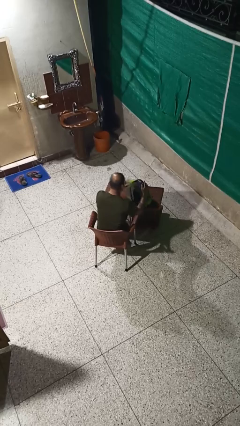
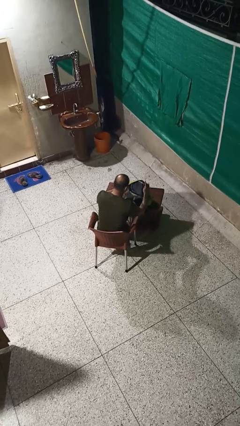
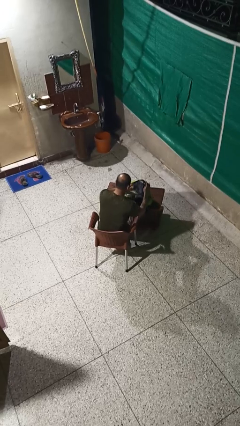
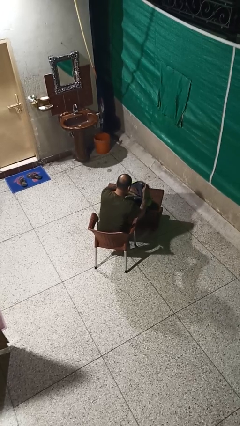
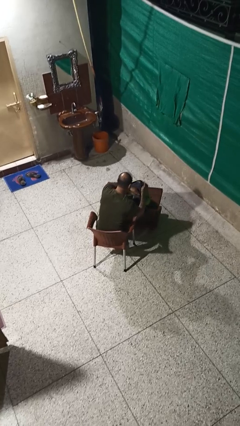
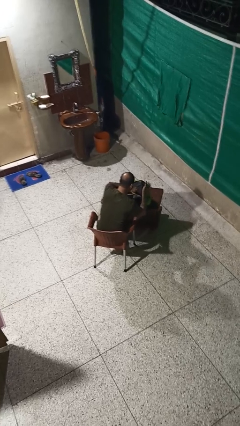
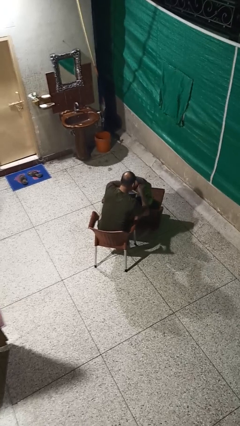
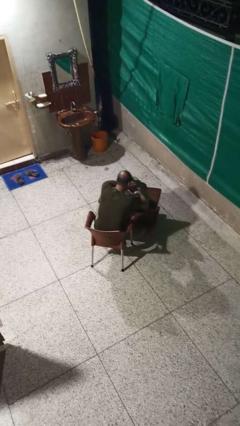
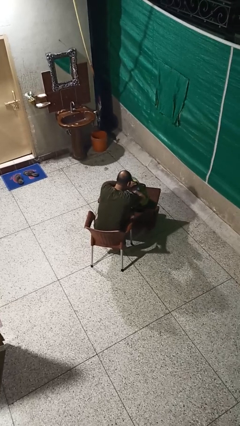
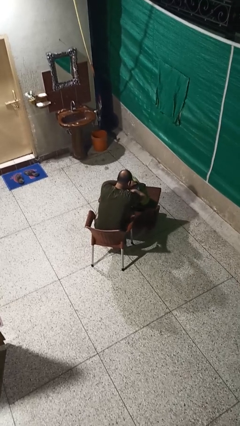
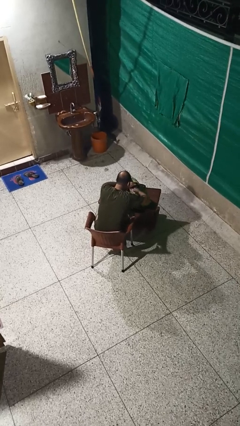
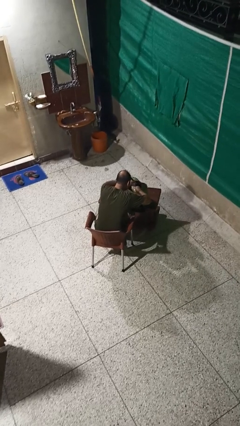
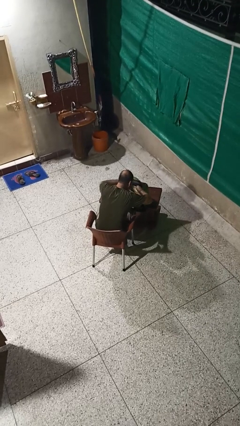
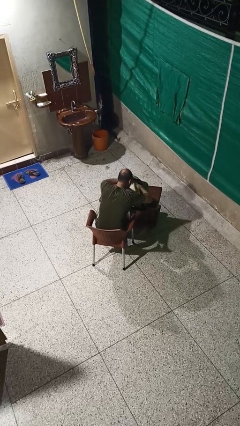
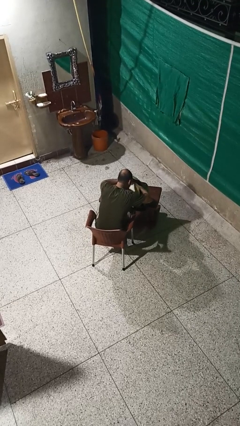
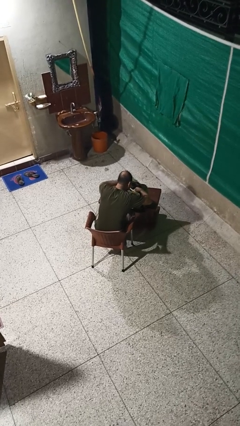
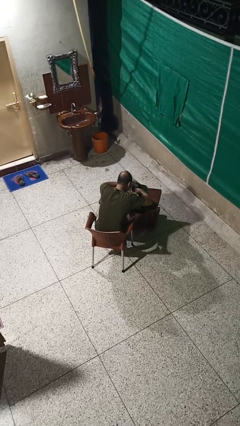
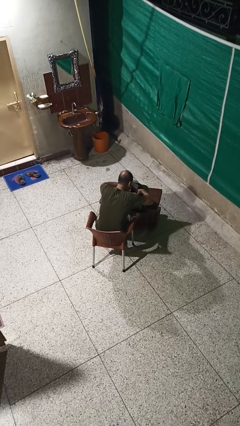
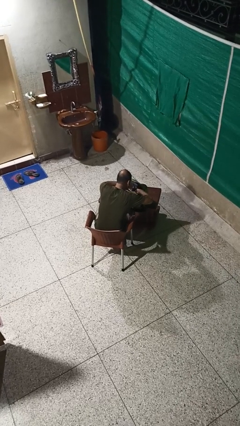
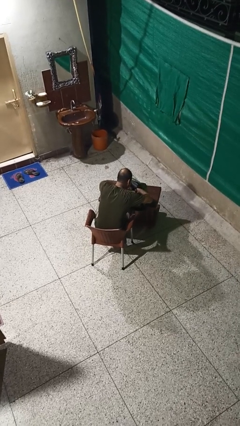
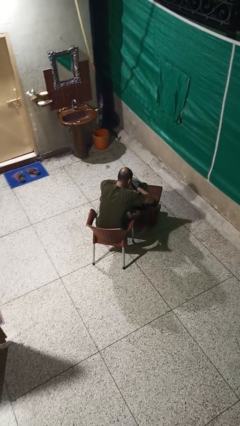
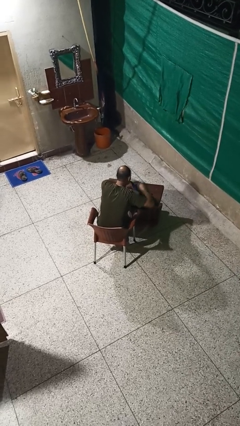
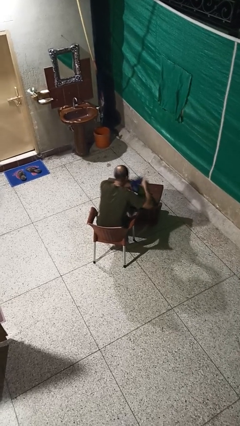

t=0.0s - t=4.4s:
person searches in backpack

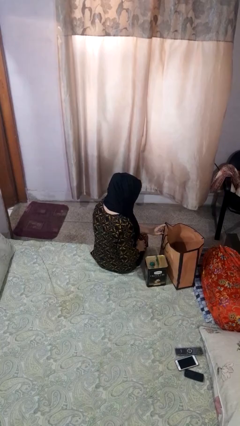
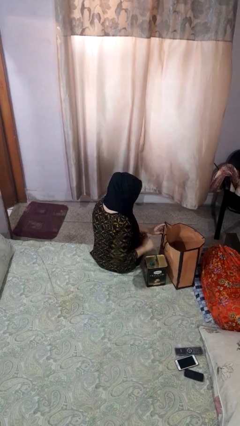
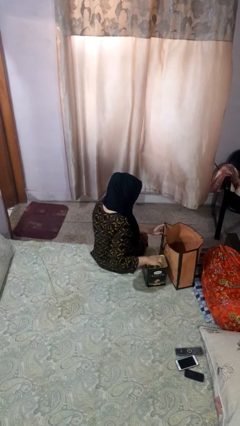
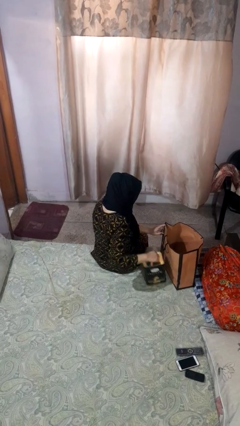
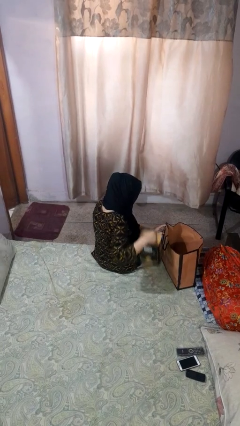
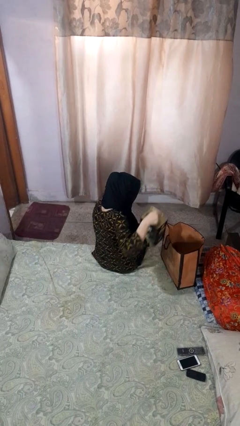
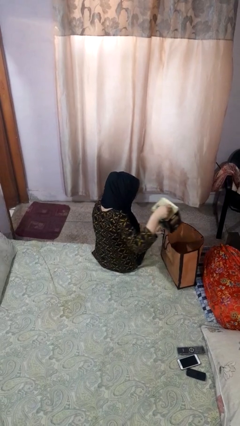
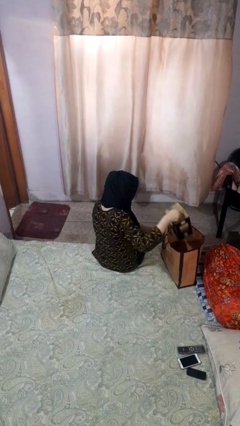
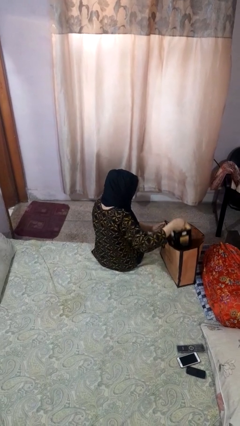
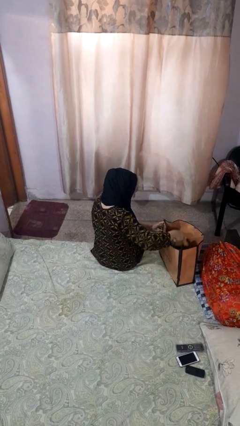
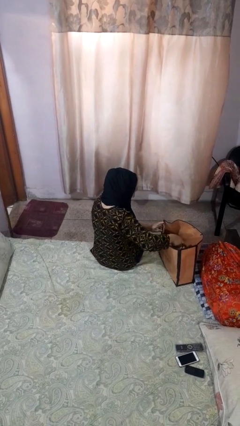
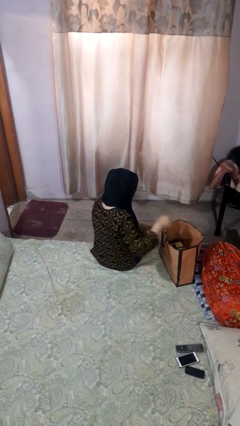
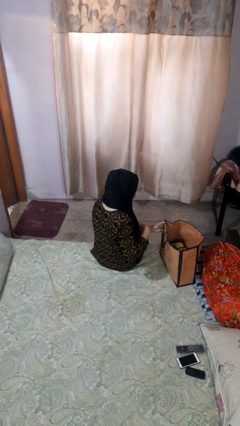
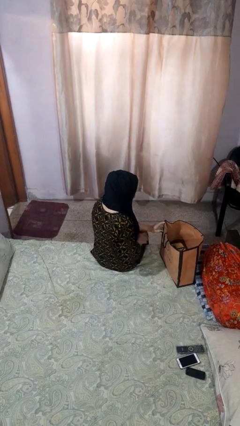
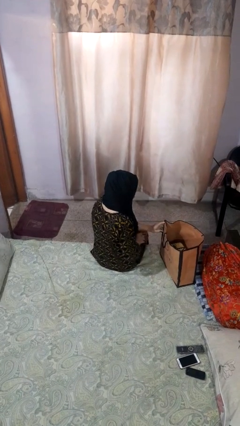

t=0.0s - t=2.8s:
person puts object into bag

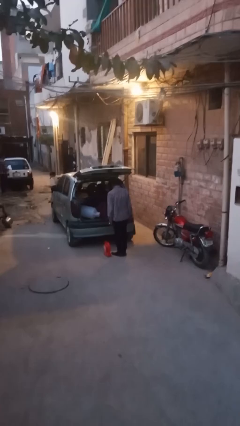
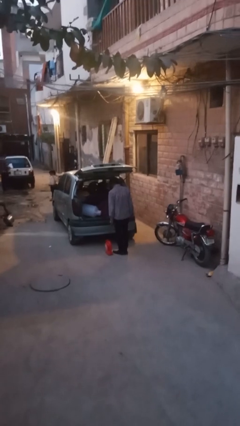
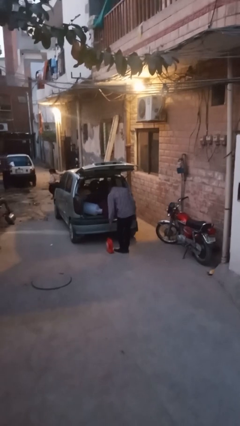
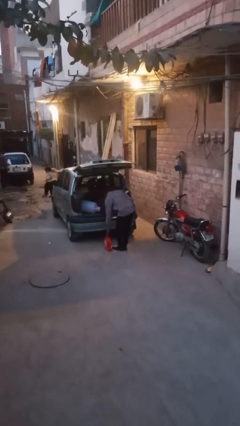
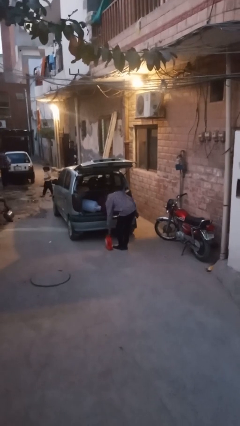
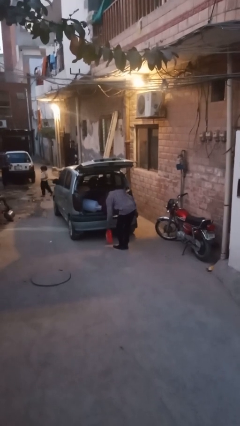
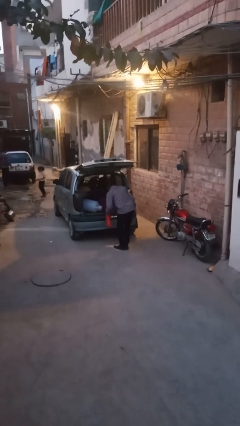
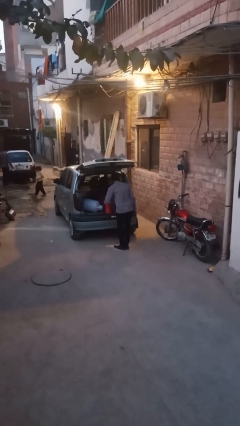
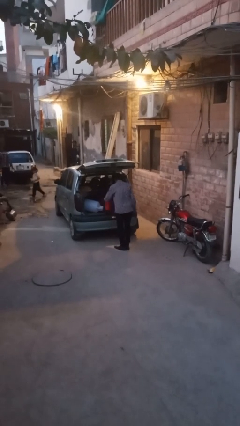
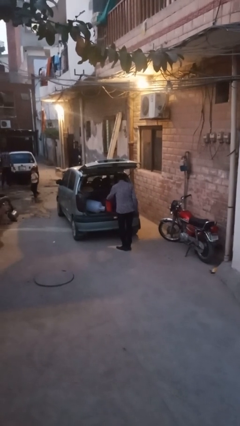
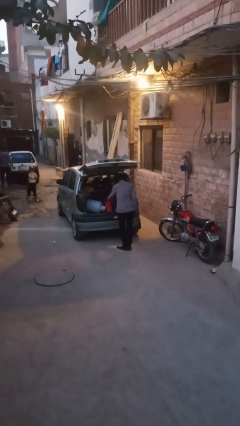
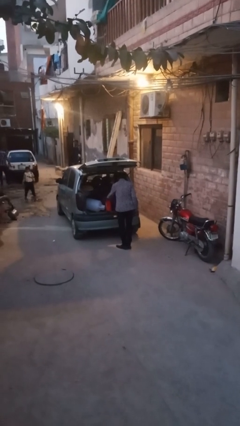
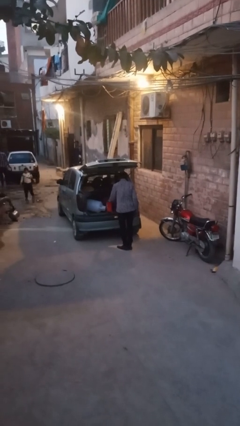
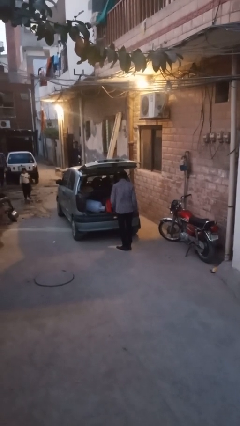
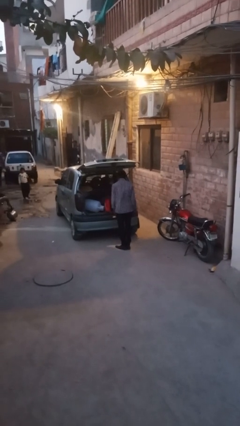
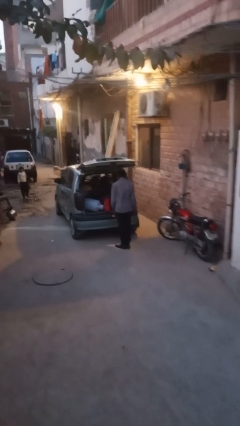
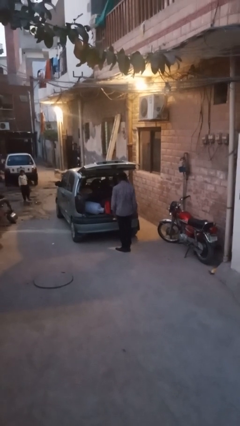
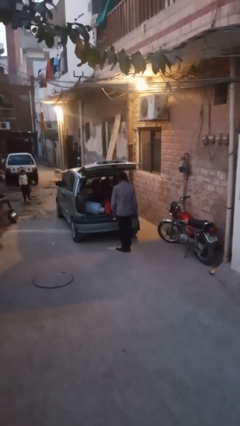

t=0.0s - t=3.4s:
person loads car

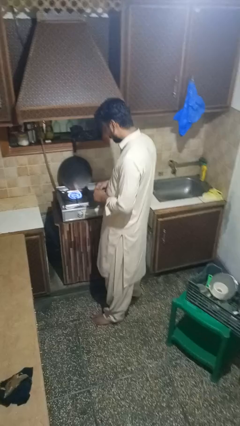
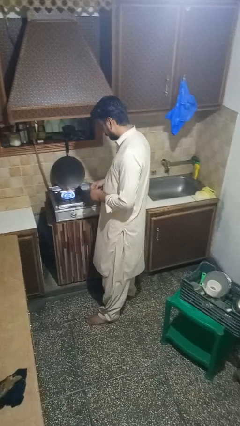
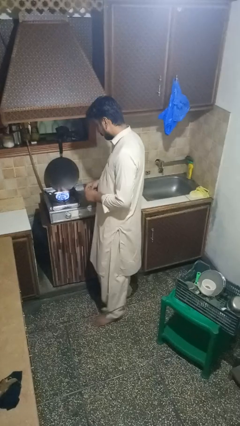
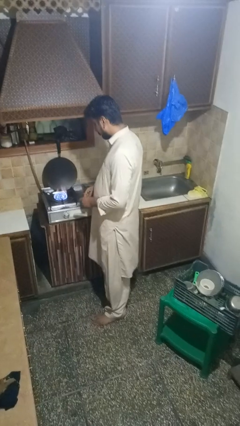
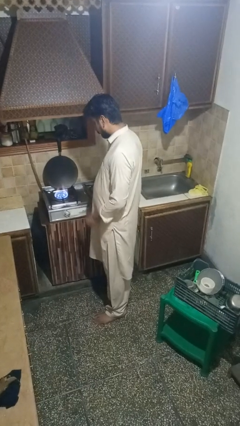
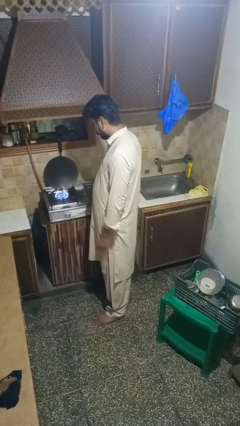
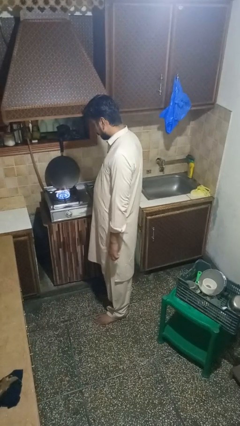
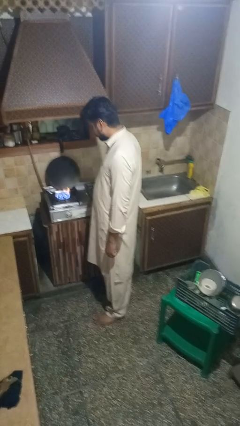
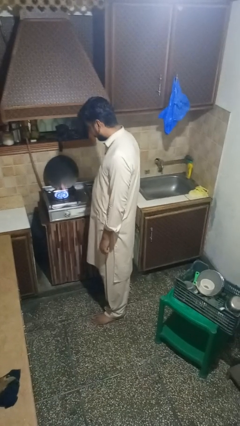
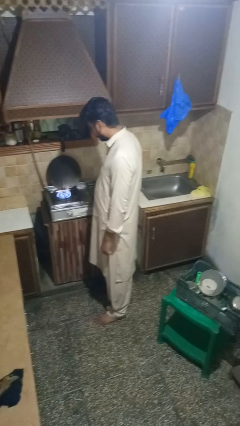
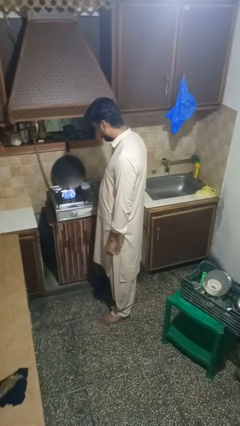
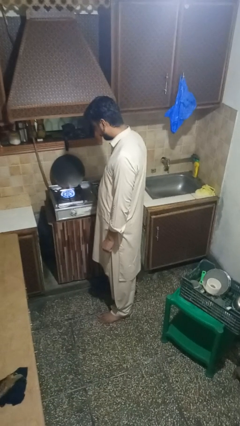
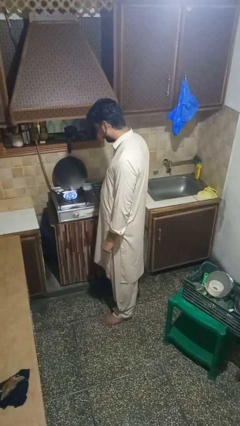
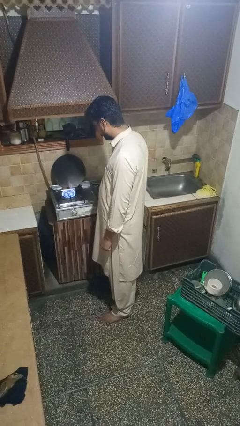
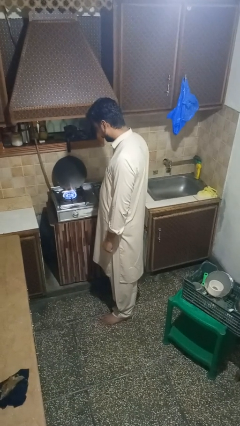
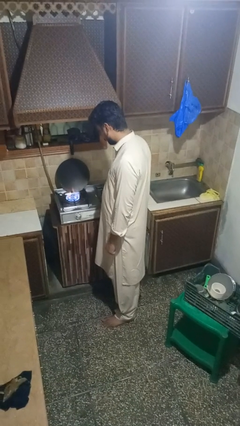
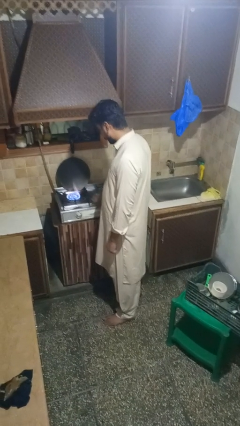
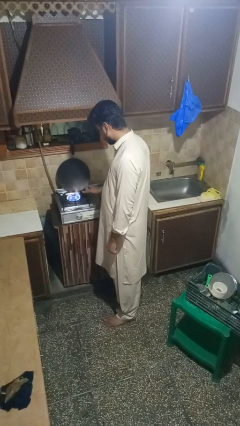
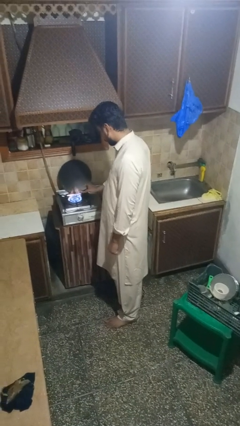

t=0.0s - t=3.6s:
person takes object from oven

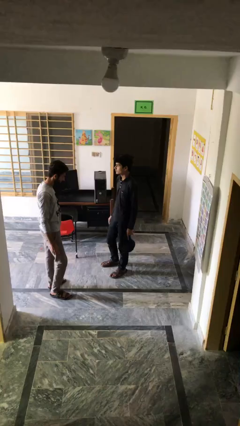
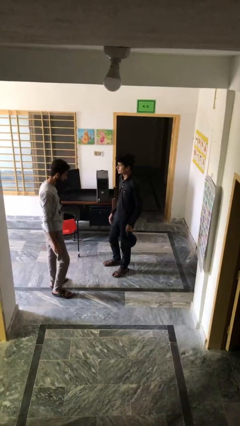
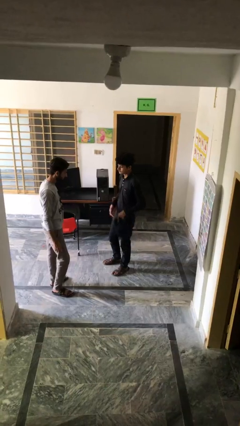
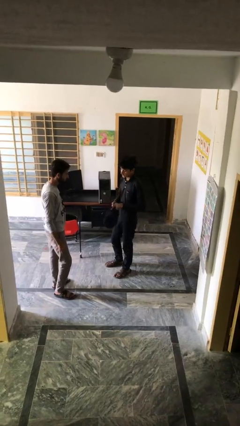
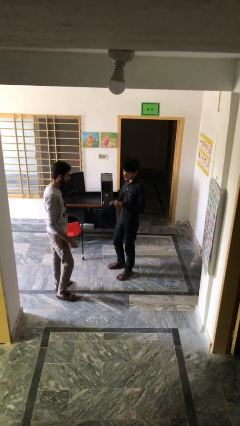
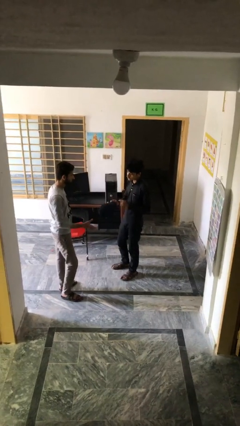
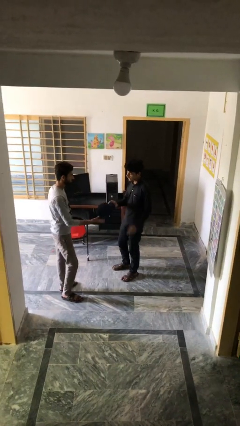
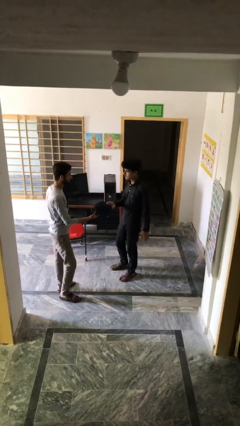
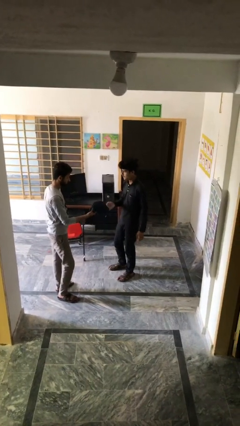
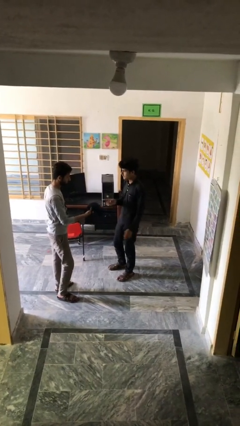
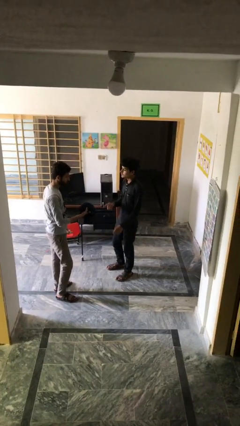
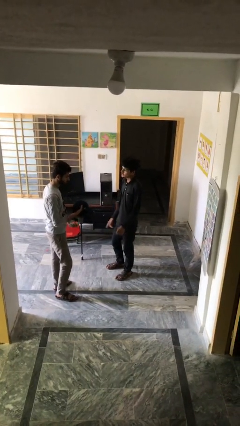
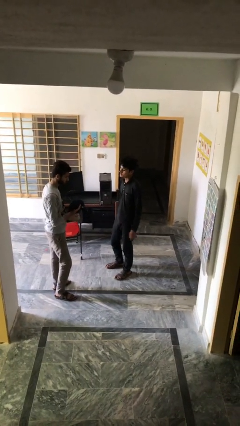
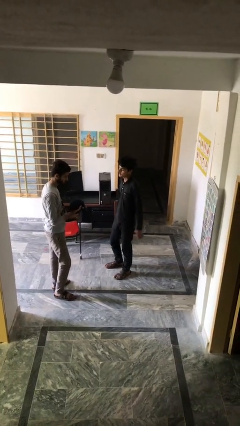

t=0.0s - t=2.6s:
person transfers object to person

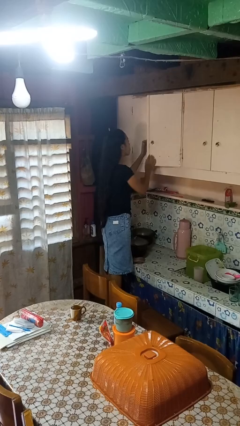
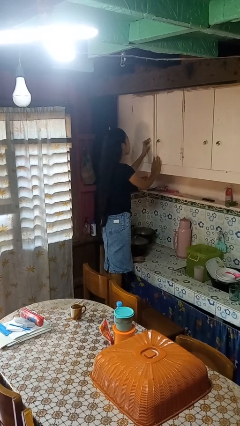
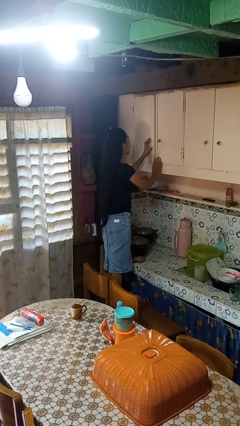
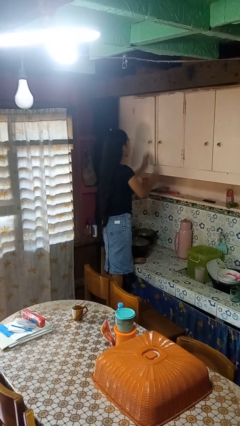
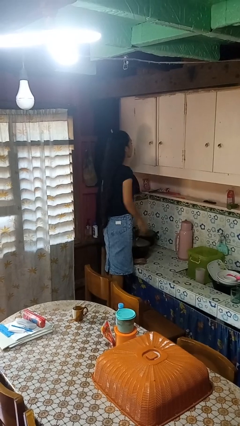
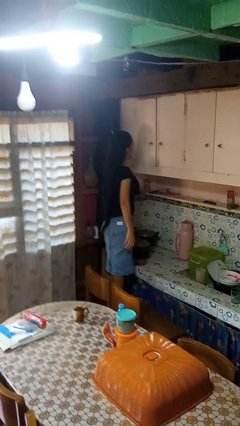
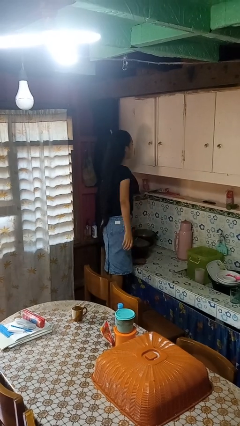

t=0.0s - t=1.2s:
person closes cabinet
